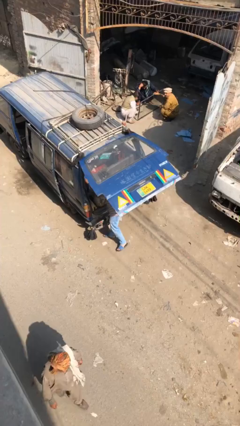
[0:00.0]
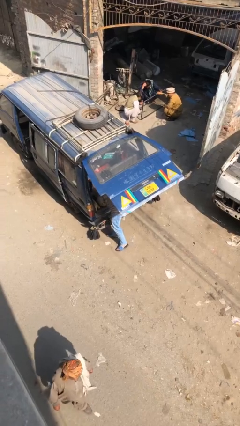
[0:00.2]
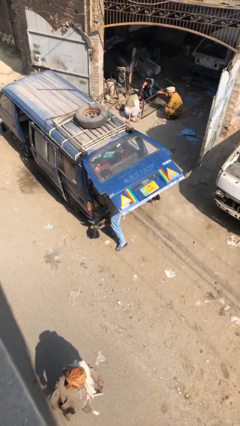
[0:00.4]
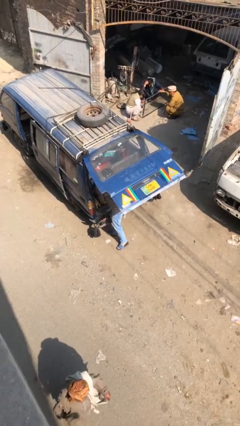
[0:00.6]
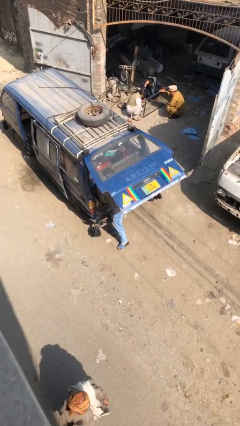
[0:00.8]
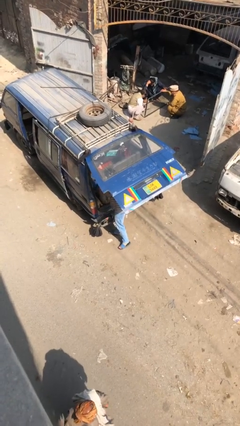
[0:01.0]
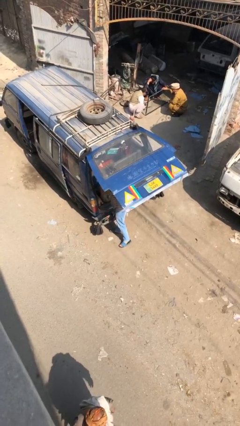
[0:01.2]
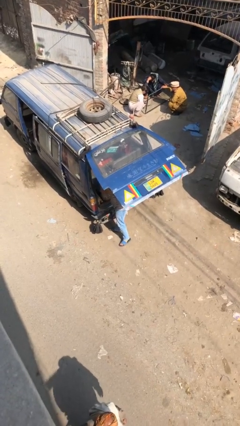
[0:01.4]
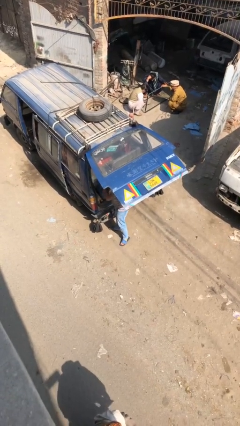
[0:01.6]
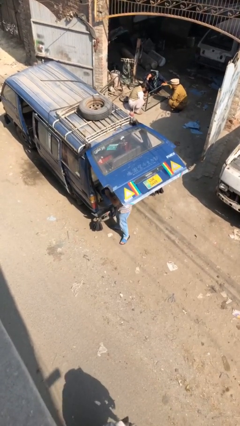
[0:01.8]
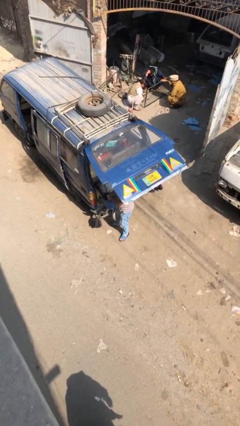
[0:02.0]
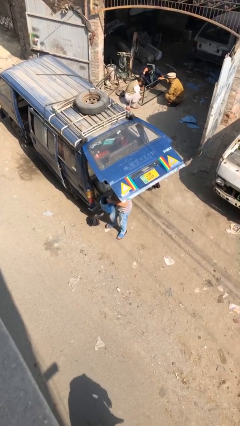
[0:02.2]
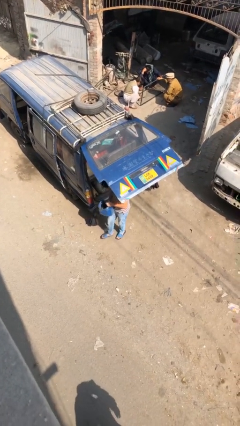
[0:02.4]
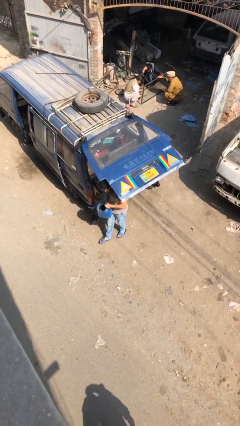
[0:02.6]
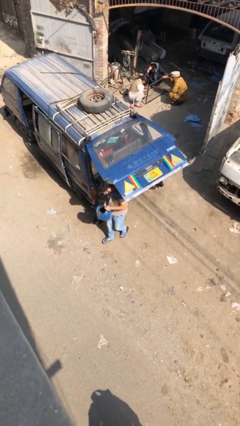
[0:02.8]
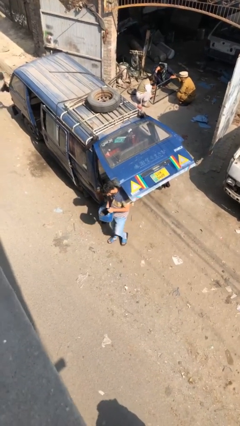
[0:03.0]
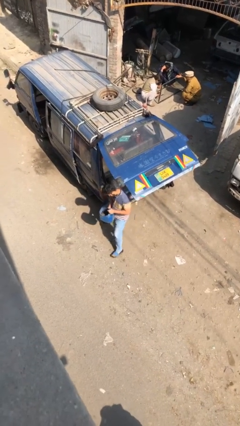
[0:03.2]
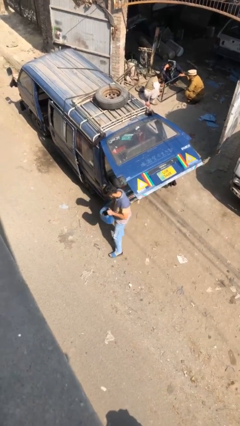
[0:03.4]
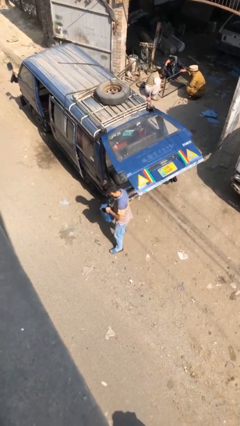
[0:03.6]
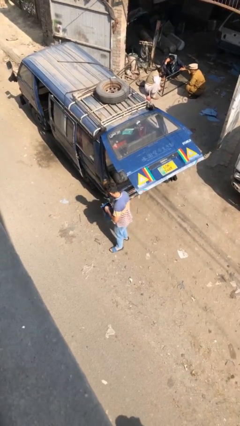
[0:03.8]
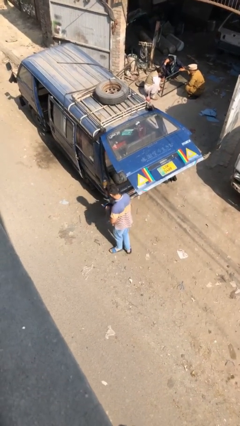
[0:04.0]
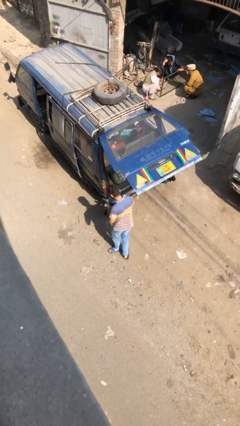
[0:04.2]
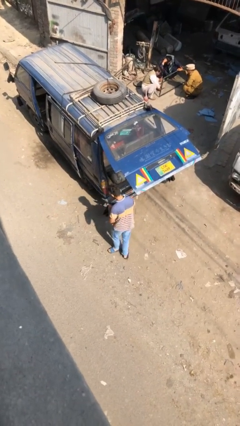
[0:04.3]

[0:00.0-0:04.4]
person unloads car

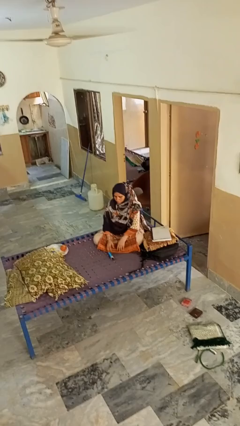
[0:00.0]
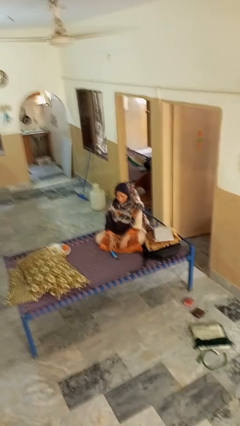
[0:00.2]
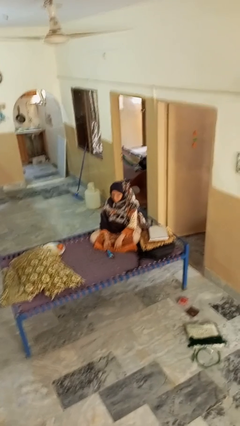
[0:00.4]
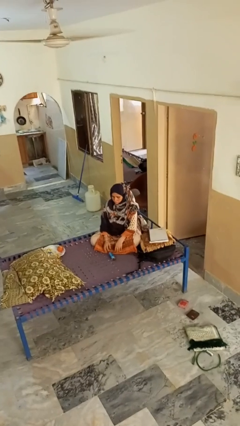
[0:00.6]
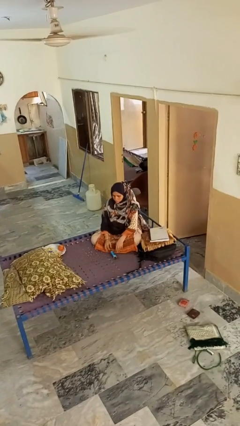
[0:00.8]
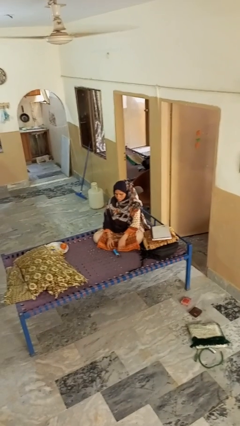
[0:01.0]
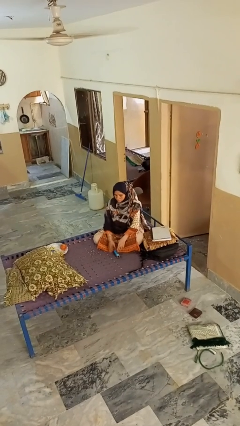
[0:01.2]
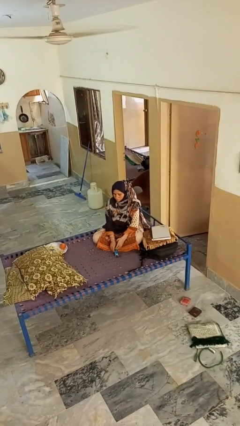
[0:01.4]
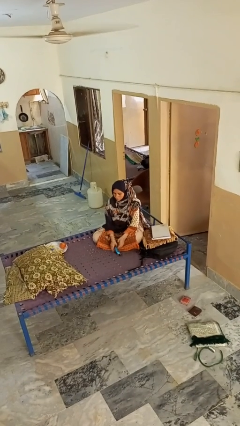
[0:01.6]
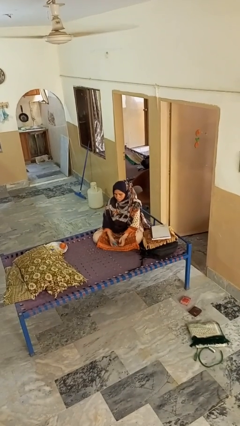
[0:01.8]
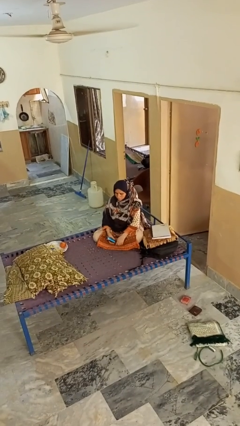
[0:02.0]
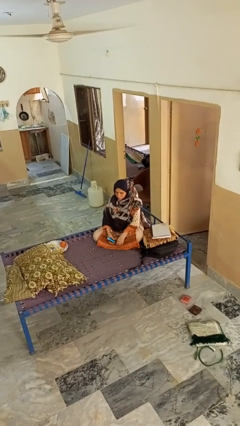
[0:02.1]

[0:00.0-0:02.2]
person picks up object from floor

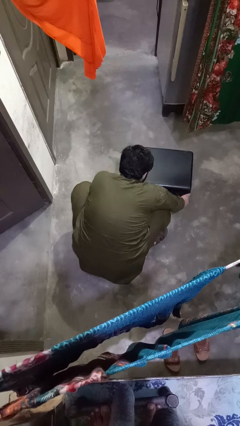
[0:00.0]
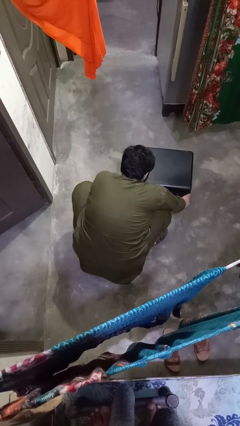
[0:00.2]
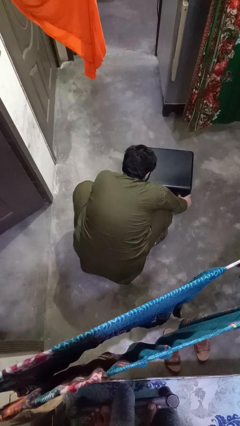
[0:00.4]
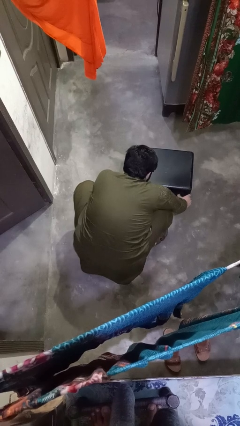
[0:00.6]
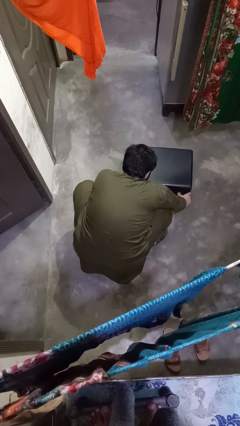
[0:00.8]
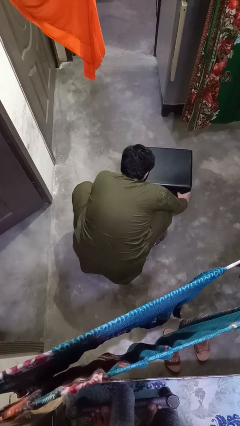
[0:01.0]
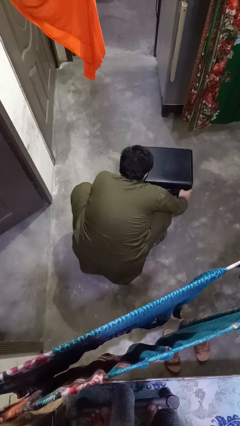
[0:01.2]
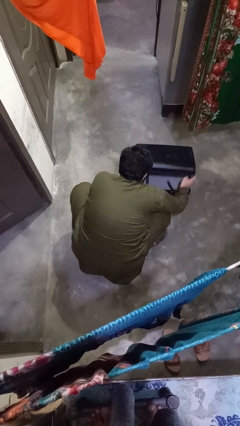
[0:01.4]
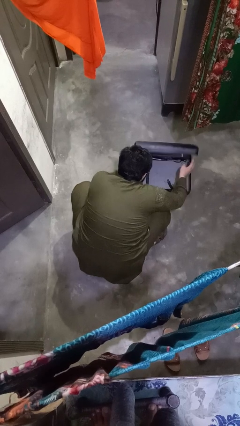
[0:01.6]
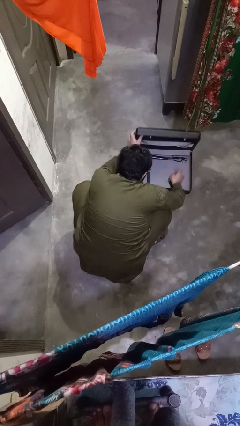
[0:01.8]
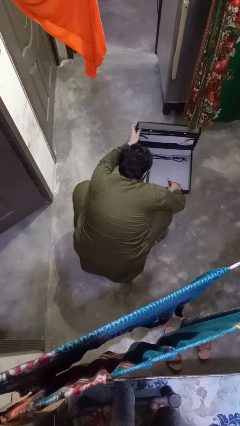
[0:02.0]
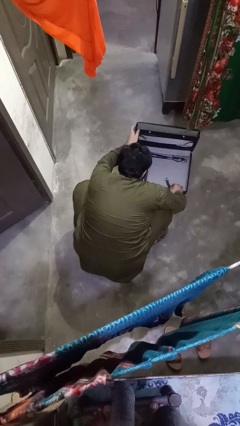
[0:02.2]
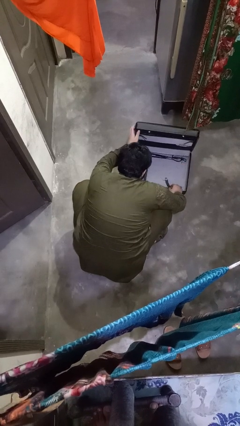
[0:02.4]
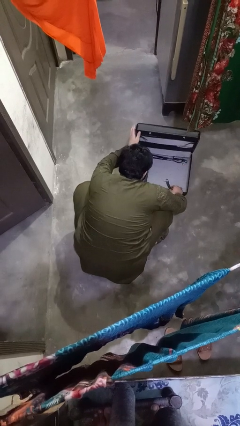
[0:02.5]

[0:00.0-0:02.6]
person opens suitcase

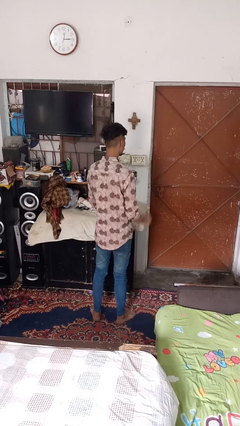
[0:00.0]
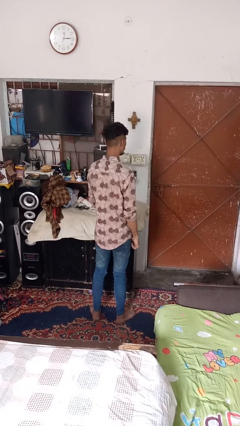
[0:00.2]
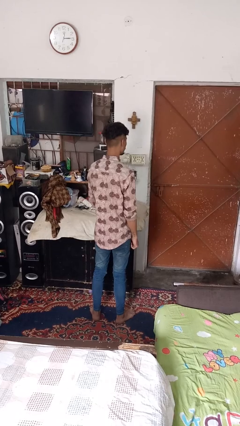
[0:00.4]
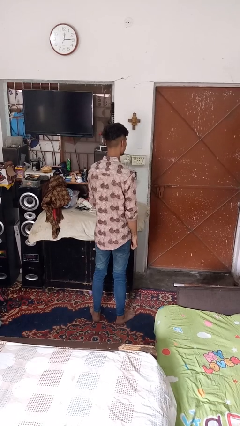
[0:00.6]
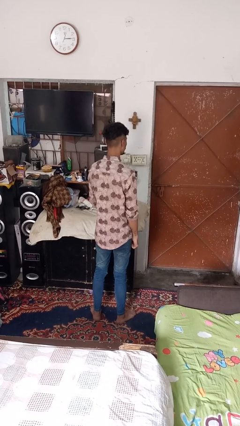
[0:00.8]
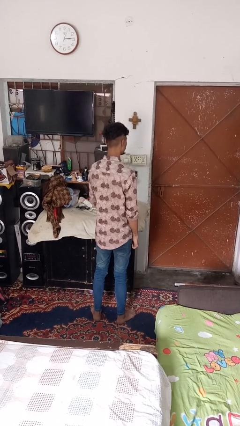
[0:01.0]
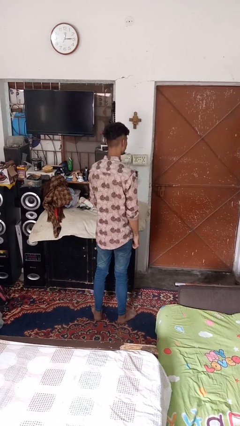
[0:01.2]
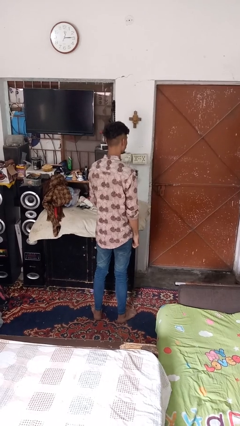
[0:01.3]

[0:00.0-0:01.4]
person yawns

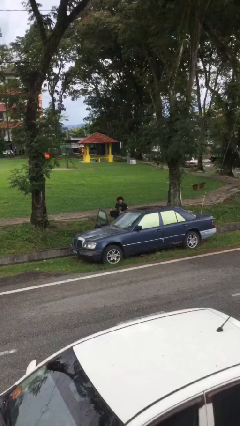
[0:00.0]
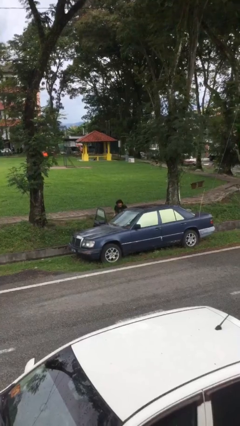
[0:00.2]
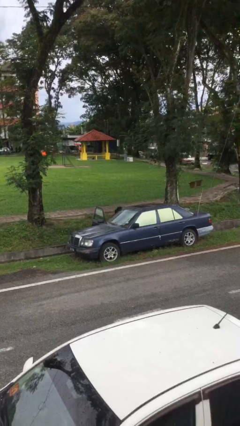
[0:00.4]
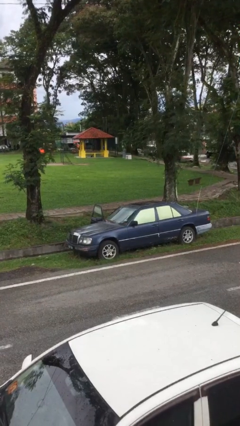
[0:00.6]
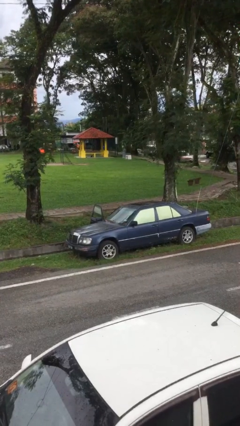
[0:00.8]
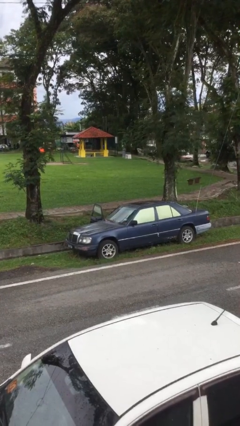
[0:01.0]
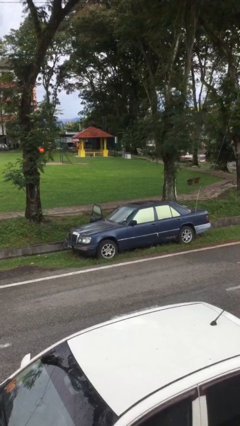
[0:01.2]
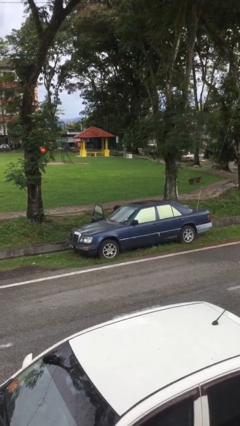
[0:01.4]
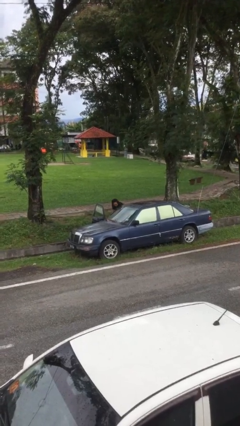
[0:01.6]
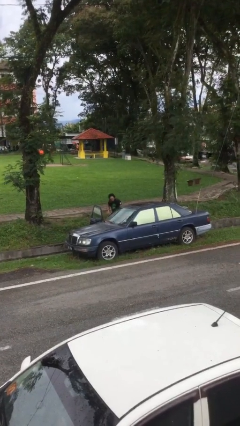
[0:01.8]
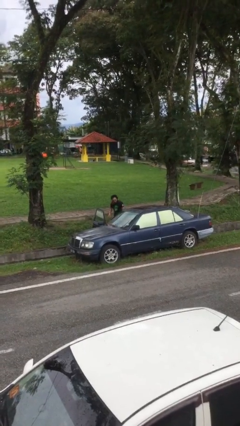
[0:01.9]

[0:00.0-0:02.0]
person loads car

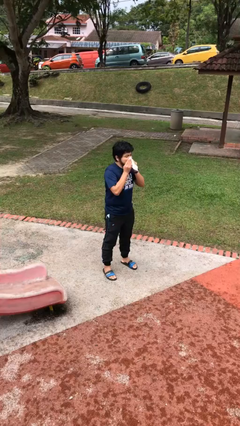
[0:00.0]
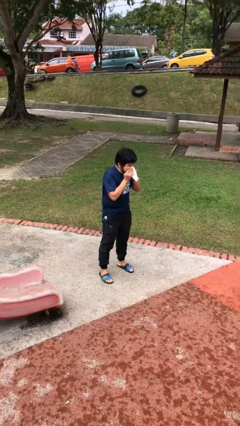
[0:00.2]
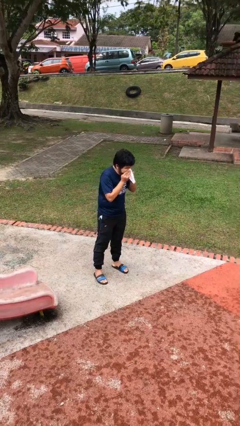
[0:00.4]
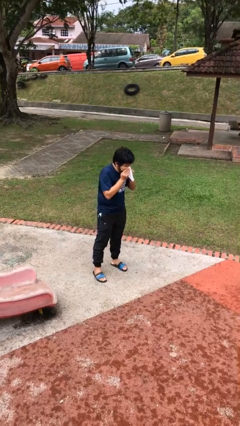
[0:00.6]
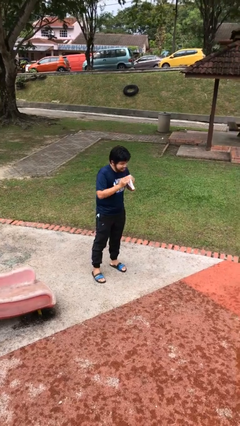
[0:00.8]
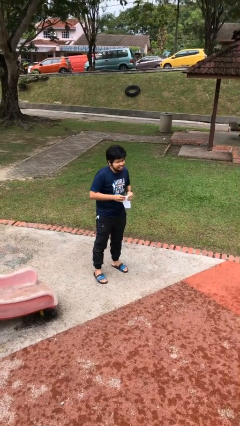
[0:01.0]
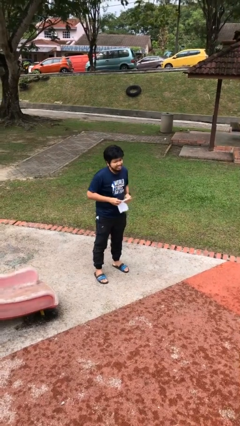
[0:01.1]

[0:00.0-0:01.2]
person blows nose

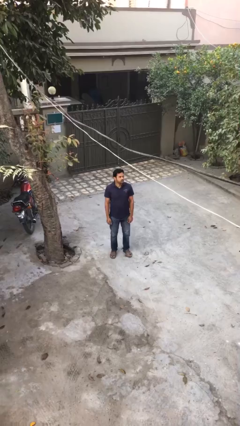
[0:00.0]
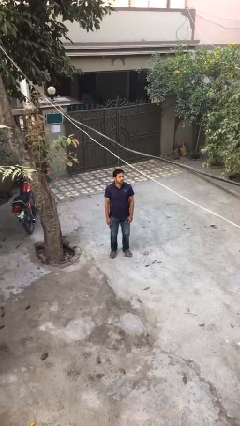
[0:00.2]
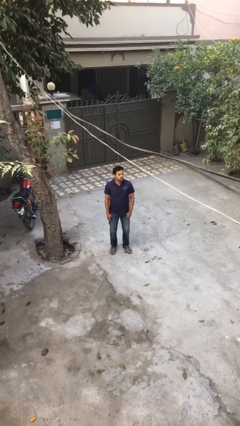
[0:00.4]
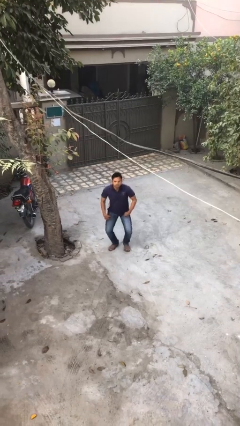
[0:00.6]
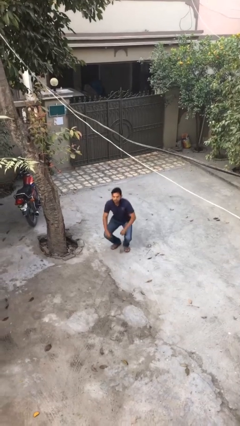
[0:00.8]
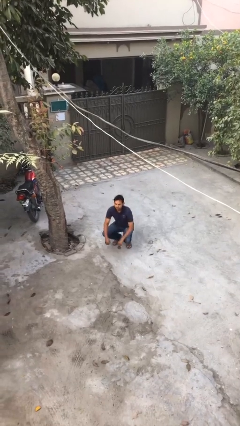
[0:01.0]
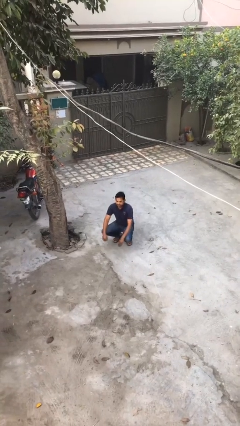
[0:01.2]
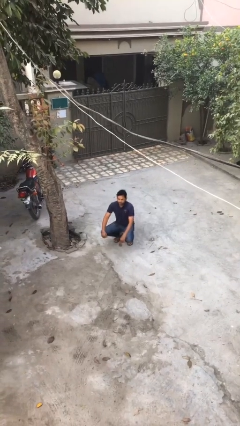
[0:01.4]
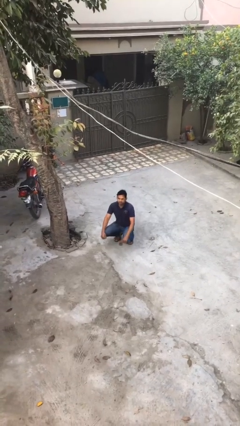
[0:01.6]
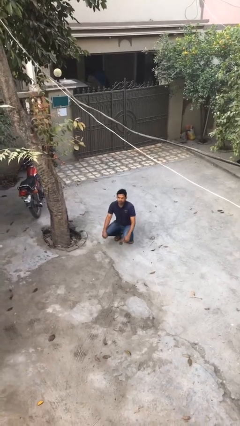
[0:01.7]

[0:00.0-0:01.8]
person sits down

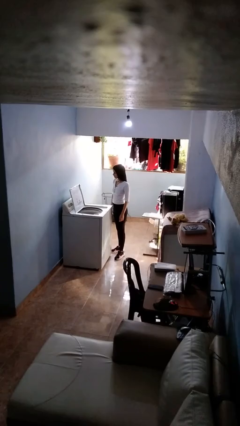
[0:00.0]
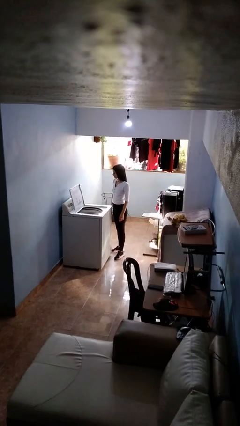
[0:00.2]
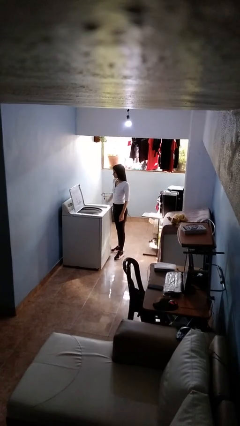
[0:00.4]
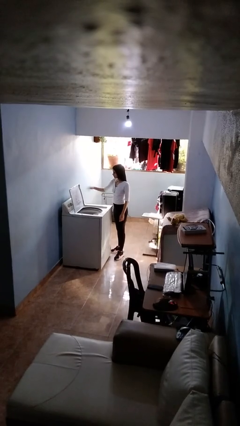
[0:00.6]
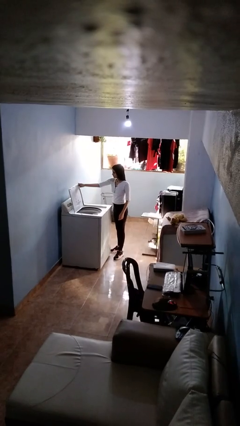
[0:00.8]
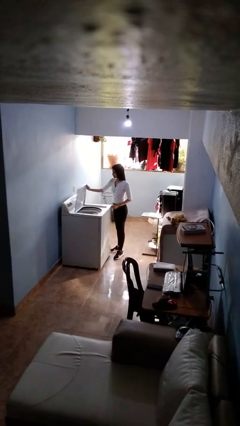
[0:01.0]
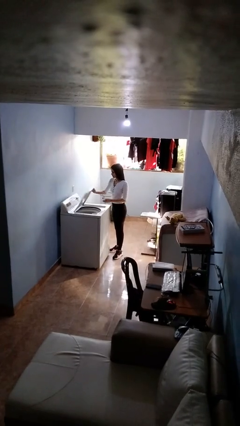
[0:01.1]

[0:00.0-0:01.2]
person closes clothes washer
